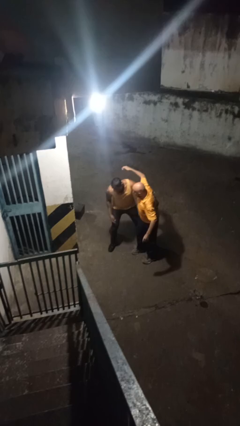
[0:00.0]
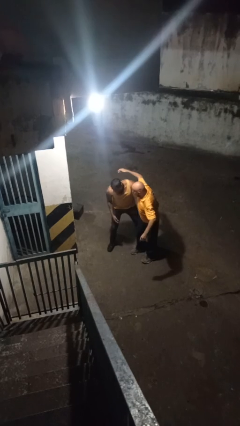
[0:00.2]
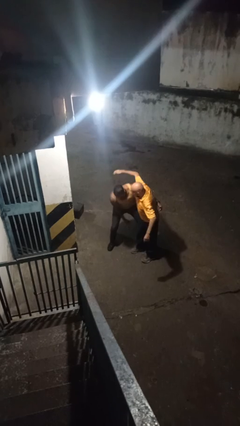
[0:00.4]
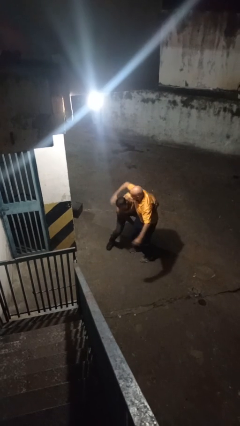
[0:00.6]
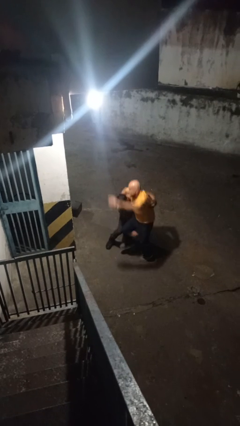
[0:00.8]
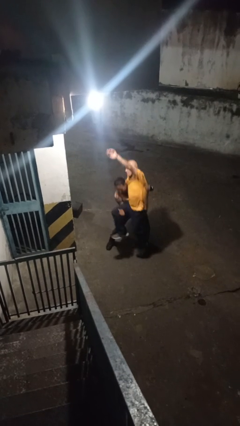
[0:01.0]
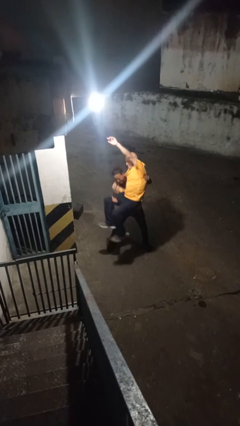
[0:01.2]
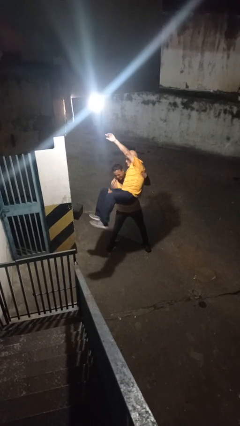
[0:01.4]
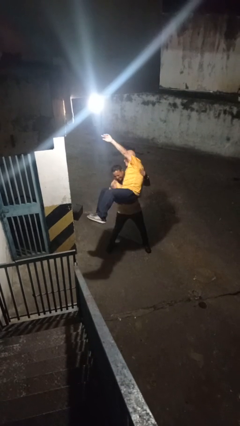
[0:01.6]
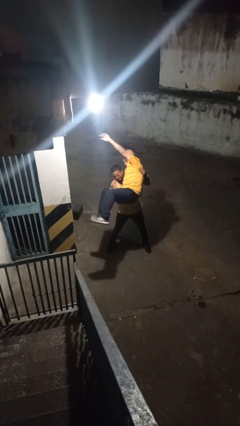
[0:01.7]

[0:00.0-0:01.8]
person picks up person

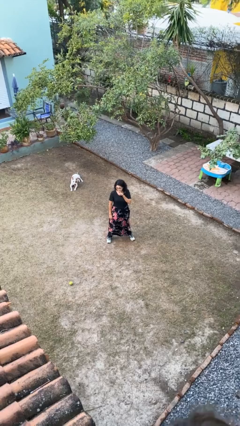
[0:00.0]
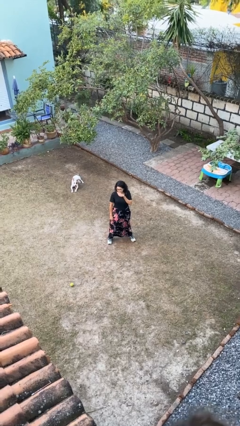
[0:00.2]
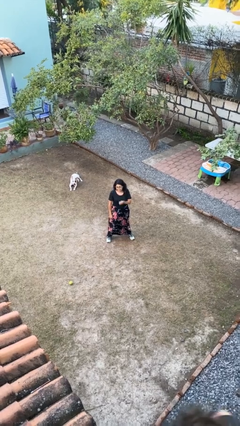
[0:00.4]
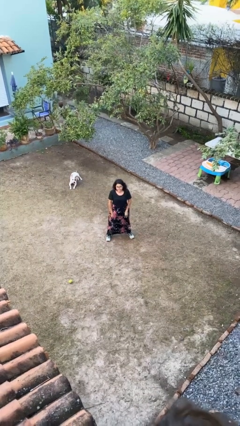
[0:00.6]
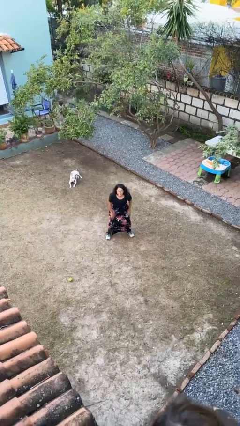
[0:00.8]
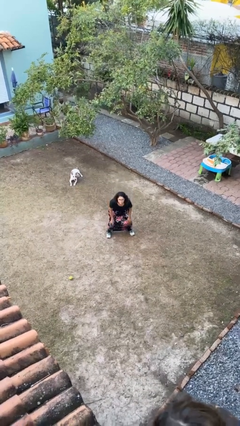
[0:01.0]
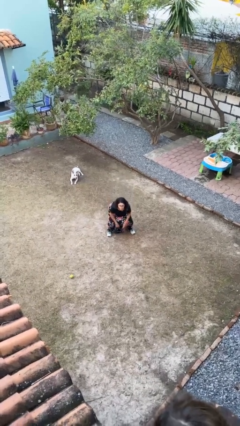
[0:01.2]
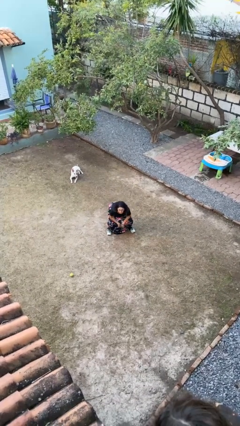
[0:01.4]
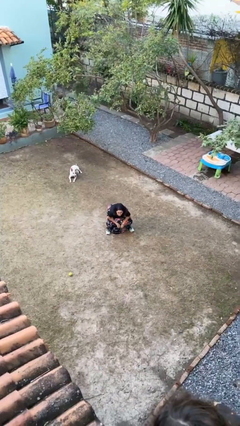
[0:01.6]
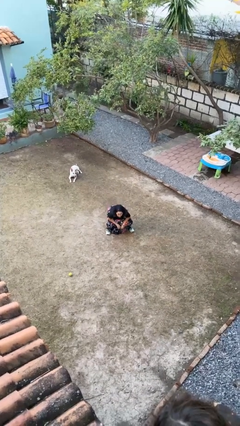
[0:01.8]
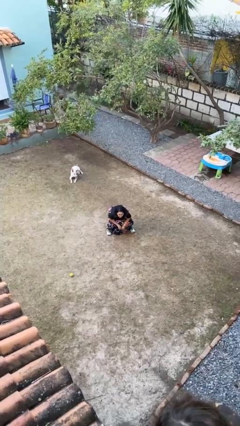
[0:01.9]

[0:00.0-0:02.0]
person squats

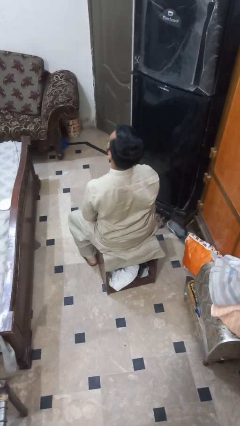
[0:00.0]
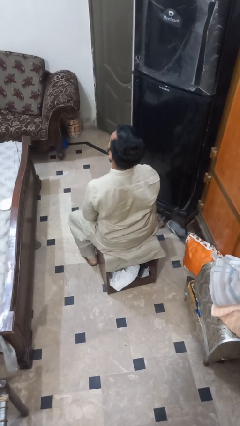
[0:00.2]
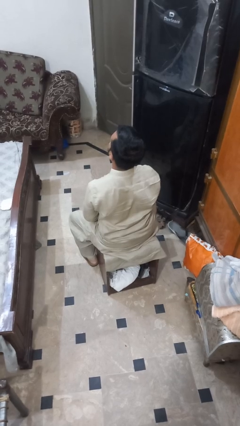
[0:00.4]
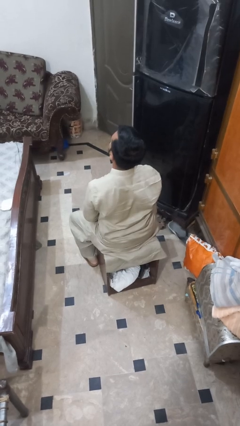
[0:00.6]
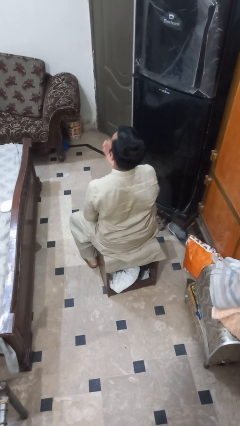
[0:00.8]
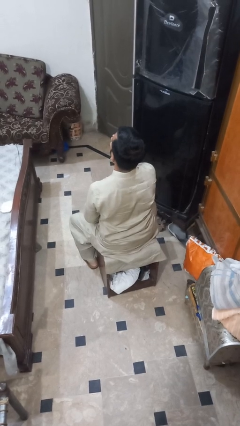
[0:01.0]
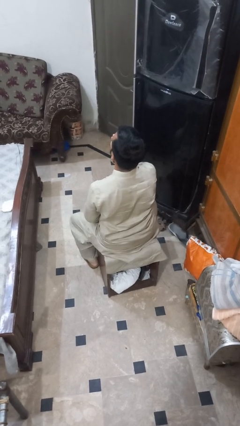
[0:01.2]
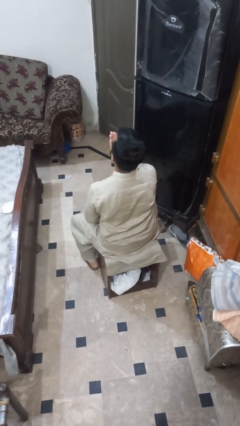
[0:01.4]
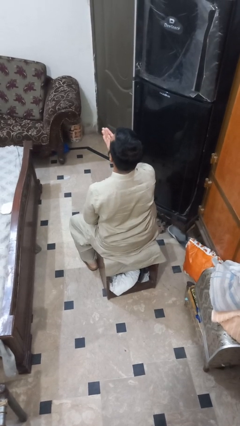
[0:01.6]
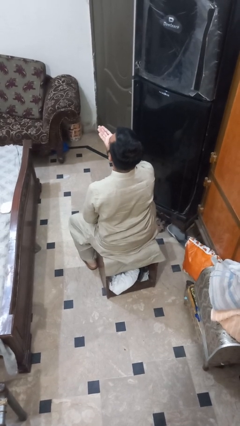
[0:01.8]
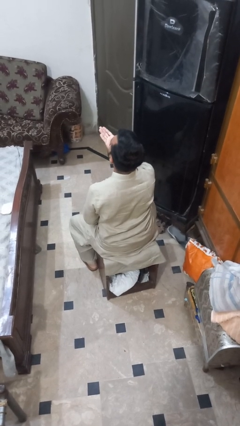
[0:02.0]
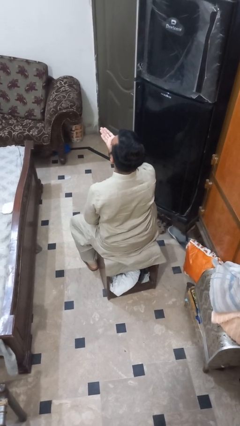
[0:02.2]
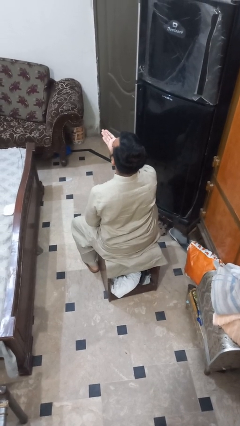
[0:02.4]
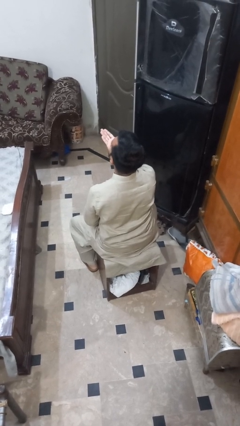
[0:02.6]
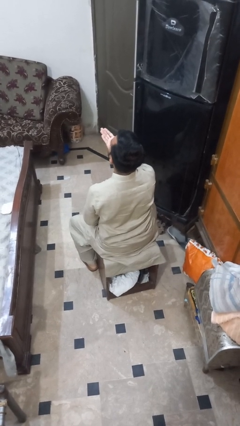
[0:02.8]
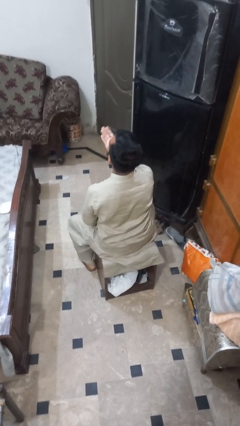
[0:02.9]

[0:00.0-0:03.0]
person gestures blow kiss

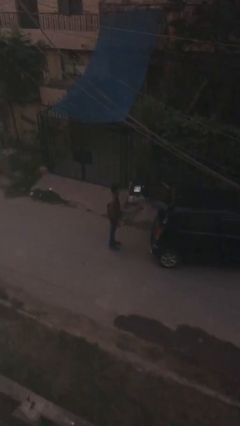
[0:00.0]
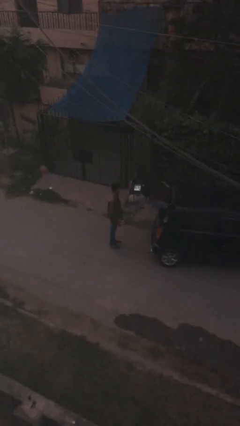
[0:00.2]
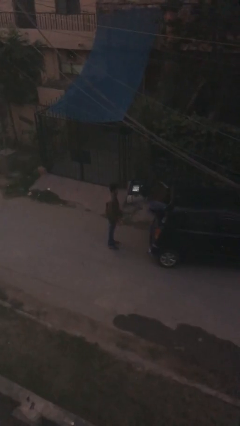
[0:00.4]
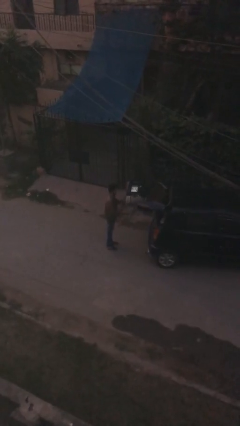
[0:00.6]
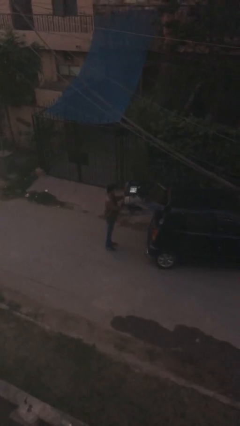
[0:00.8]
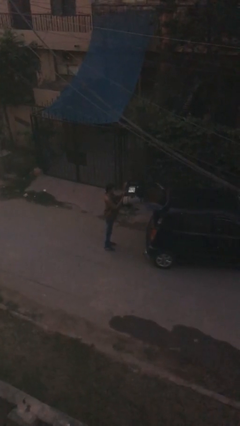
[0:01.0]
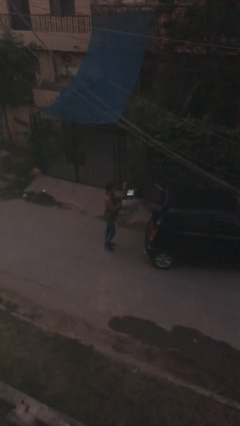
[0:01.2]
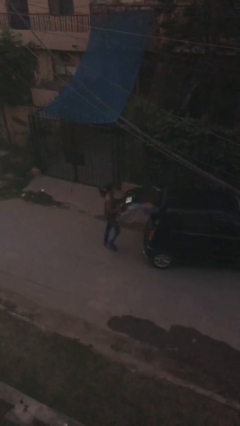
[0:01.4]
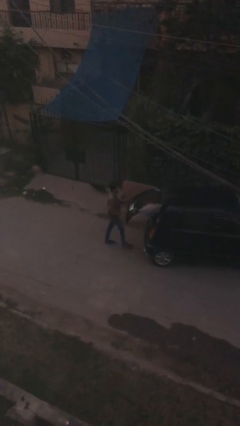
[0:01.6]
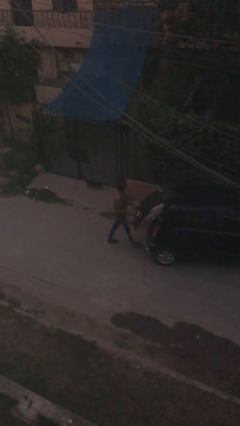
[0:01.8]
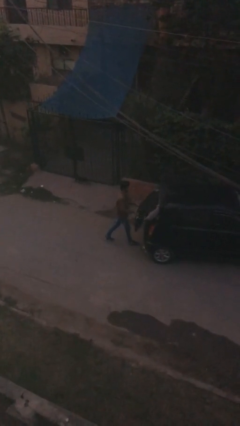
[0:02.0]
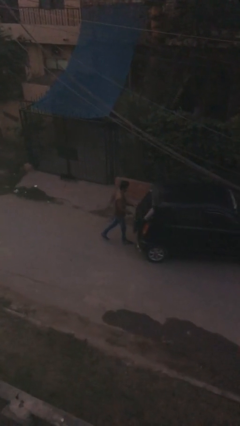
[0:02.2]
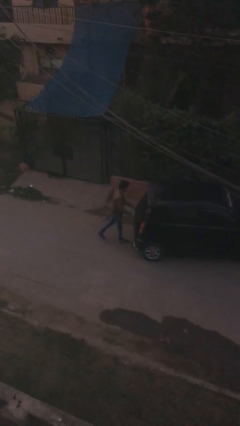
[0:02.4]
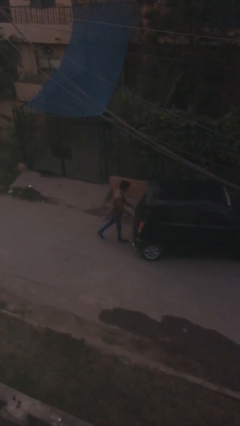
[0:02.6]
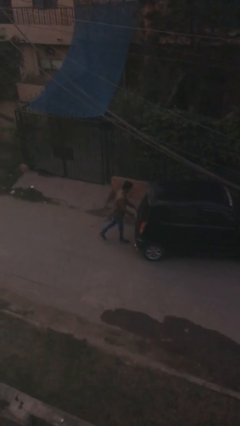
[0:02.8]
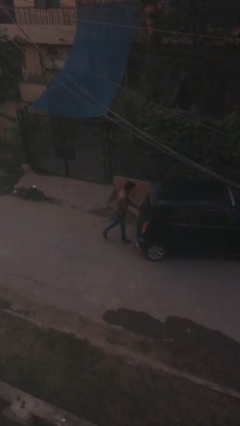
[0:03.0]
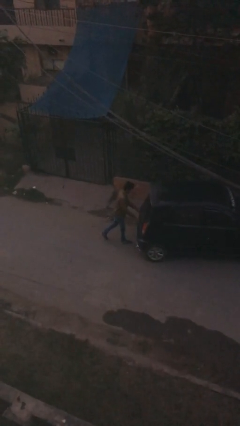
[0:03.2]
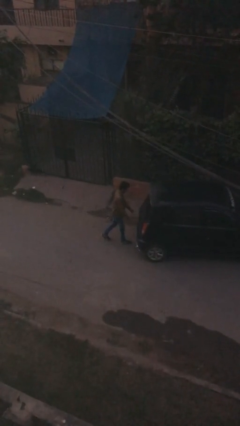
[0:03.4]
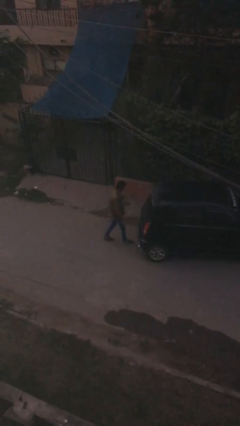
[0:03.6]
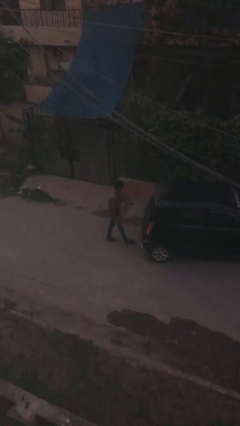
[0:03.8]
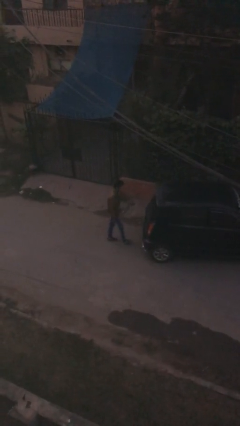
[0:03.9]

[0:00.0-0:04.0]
person closes car trunk

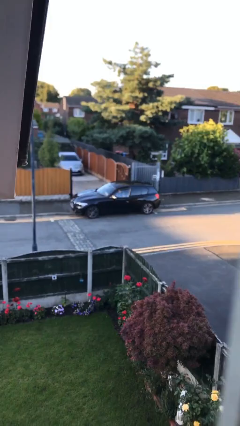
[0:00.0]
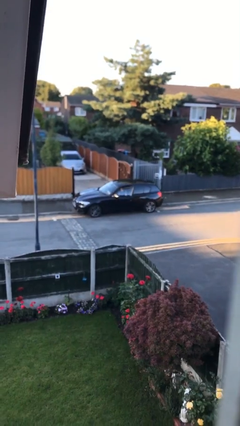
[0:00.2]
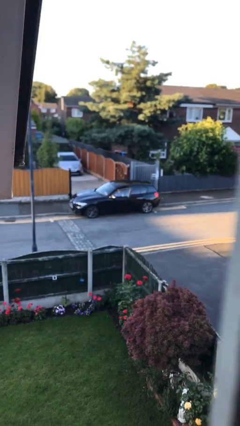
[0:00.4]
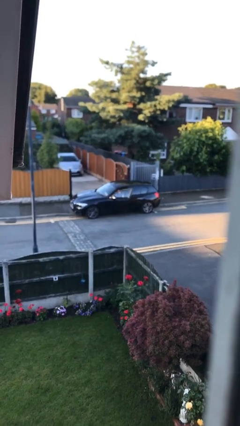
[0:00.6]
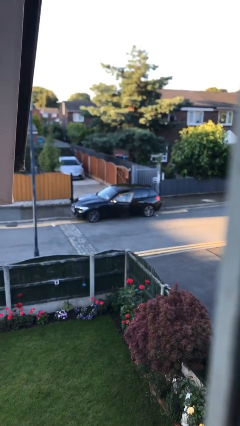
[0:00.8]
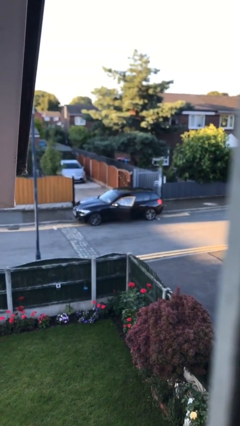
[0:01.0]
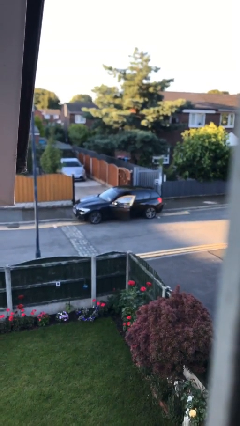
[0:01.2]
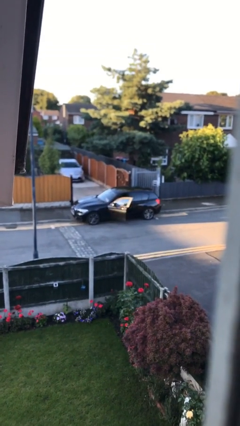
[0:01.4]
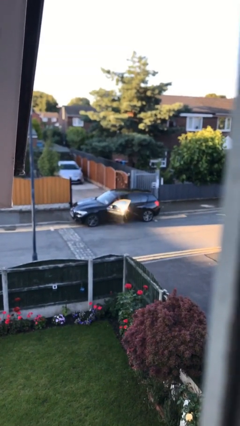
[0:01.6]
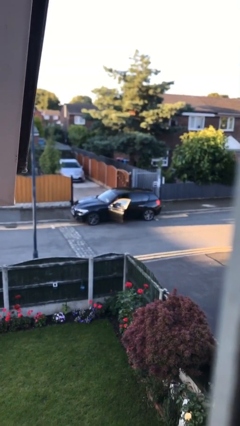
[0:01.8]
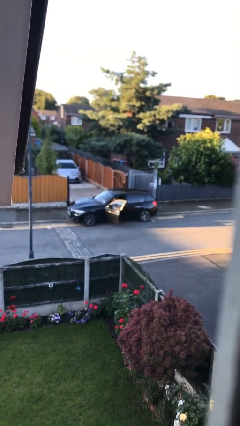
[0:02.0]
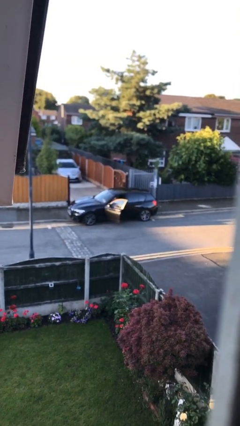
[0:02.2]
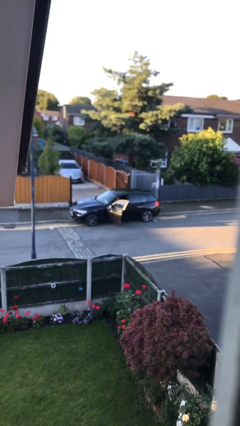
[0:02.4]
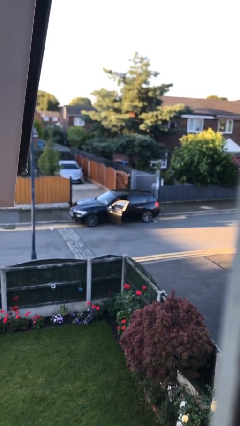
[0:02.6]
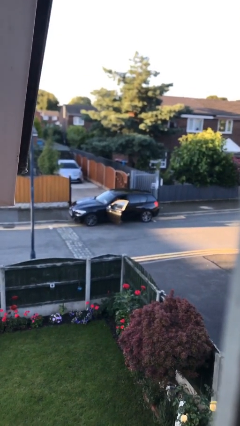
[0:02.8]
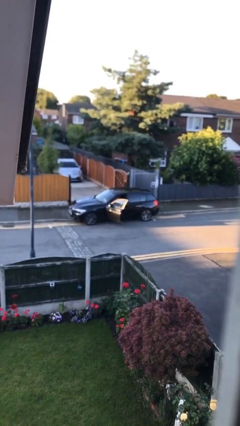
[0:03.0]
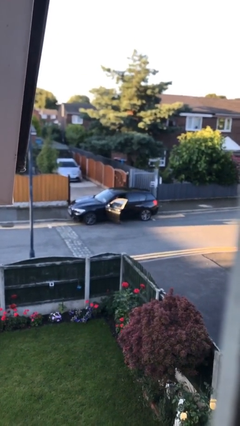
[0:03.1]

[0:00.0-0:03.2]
person opens car door

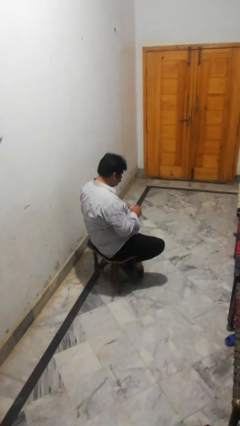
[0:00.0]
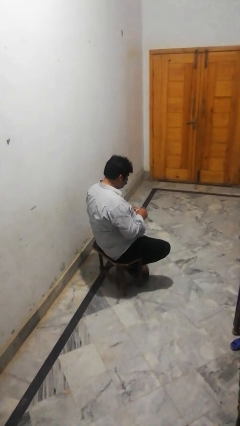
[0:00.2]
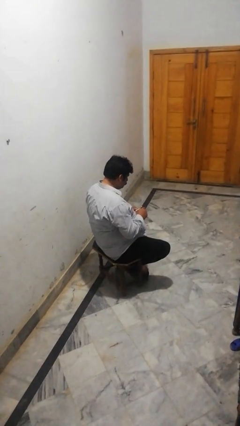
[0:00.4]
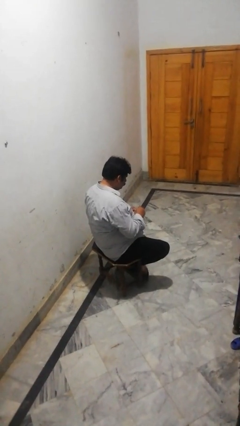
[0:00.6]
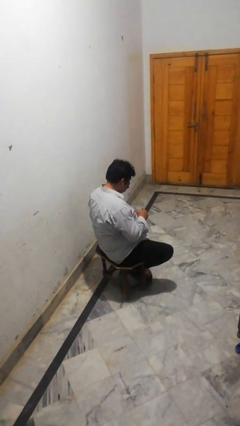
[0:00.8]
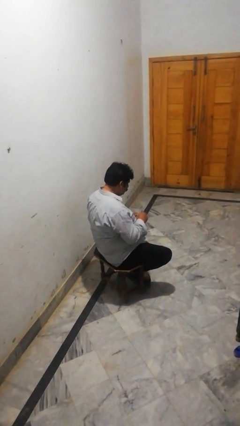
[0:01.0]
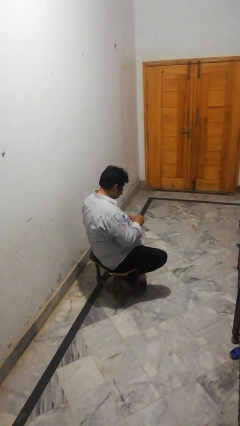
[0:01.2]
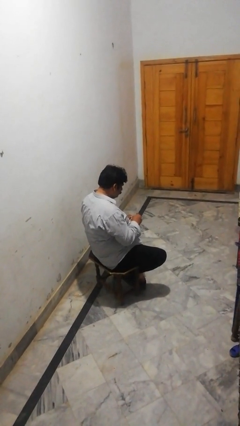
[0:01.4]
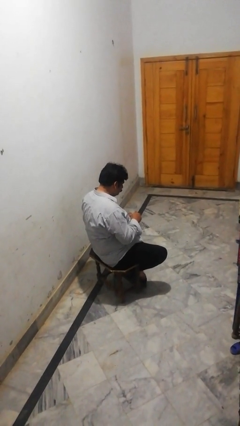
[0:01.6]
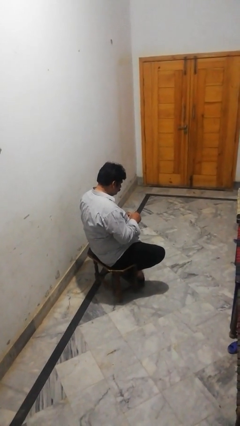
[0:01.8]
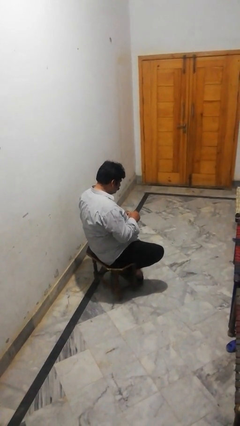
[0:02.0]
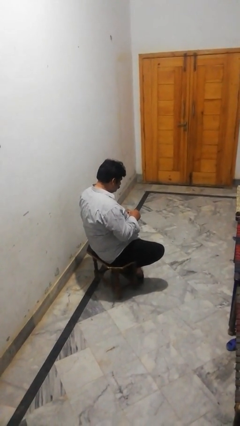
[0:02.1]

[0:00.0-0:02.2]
person stirs mug

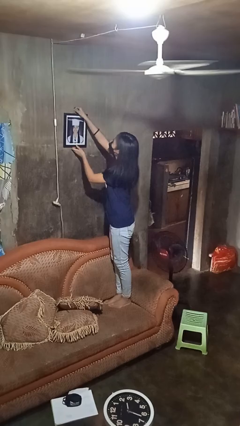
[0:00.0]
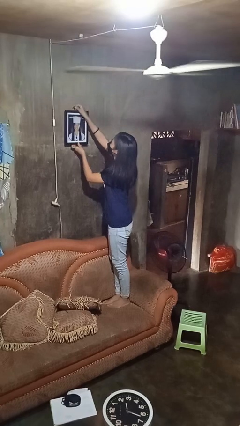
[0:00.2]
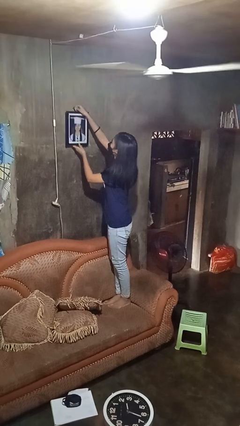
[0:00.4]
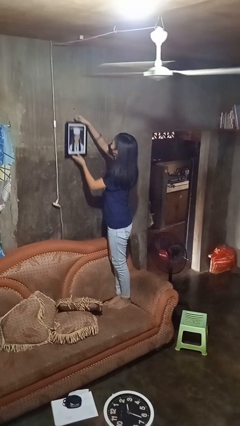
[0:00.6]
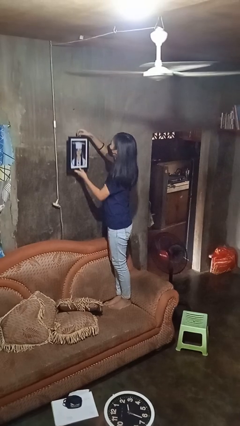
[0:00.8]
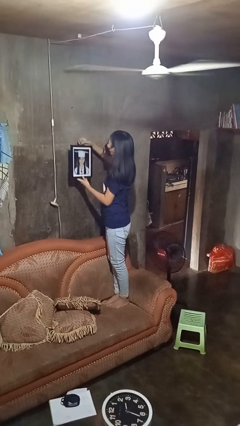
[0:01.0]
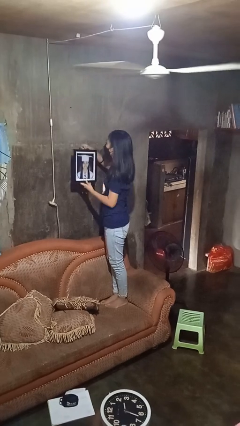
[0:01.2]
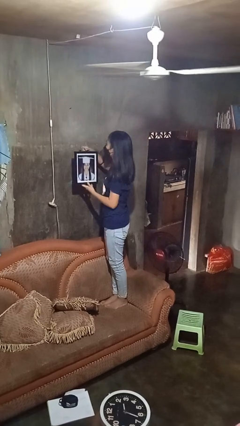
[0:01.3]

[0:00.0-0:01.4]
person takes down picture frame
